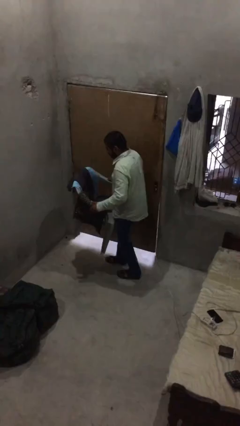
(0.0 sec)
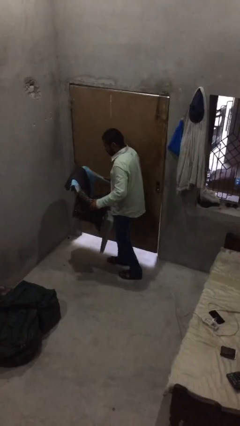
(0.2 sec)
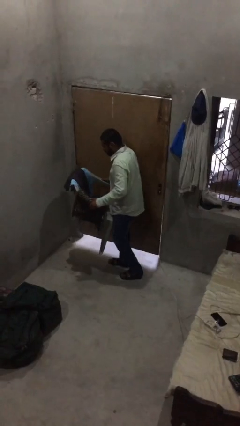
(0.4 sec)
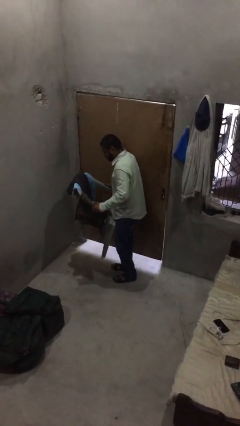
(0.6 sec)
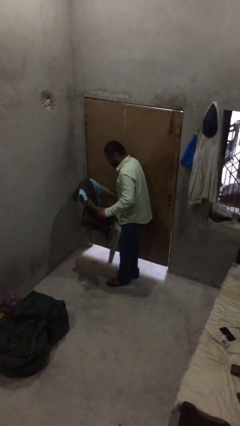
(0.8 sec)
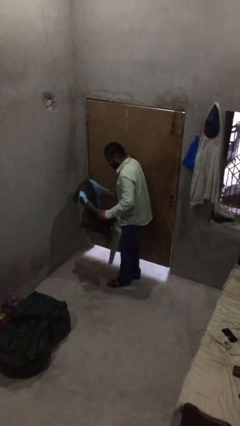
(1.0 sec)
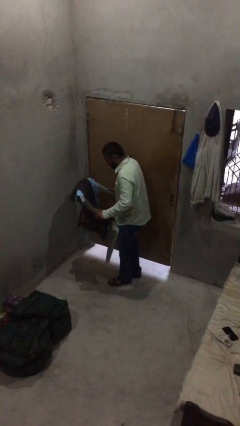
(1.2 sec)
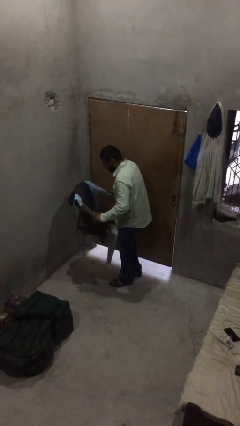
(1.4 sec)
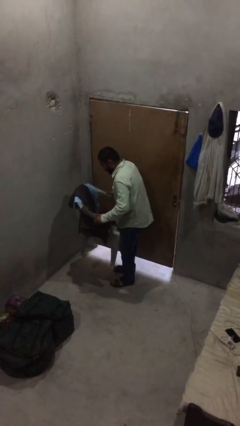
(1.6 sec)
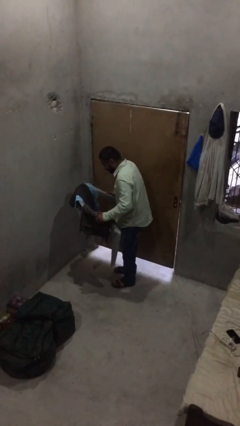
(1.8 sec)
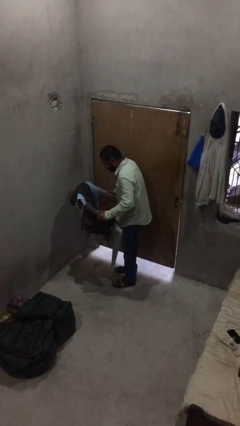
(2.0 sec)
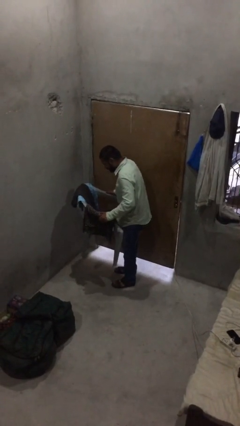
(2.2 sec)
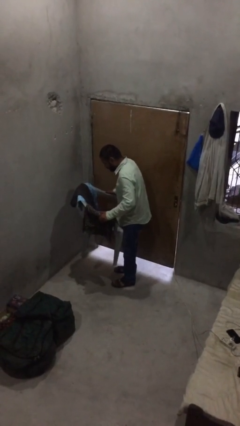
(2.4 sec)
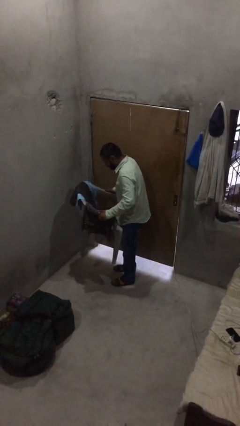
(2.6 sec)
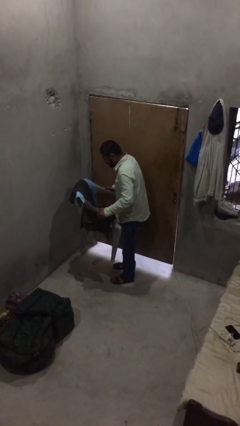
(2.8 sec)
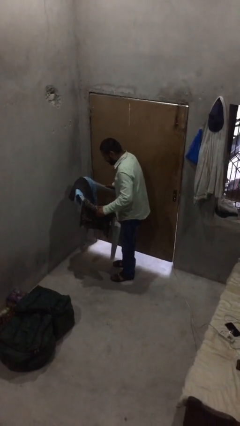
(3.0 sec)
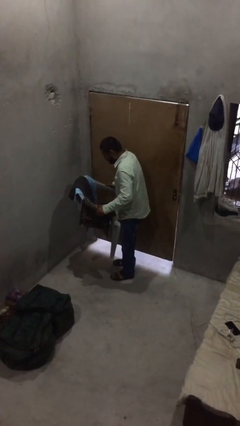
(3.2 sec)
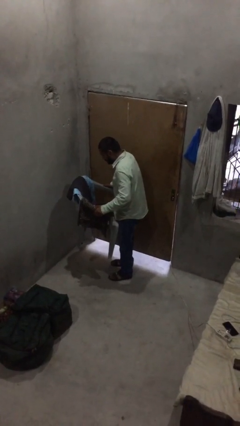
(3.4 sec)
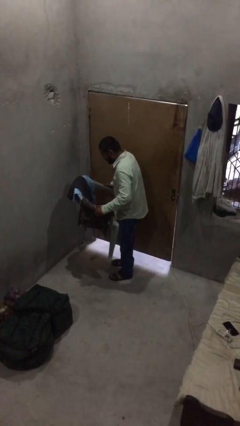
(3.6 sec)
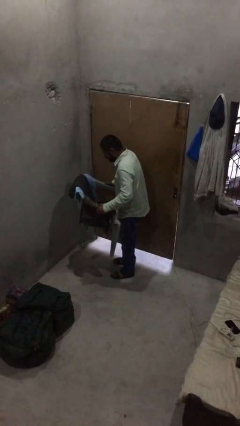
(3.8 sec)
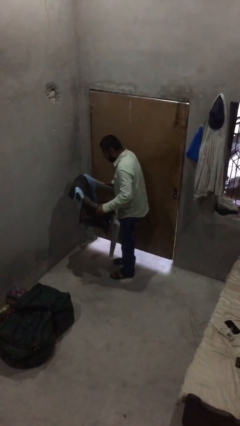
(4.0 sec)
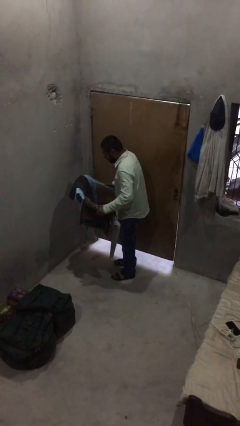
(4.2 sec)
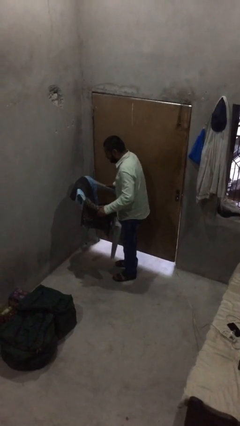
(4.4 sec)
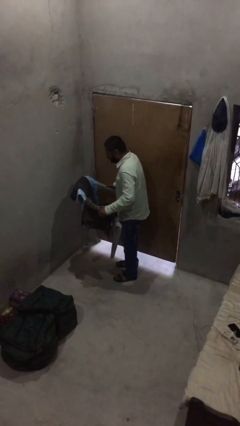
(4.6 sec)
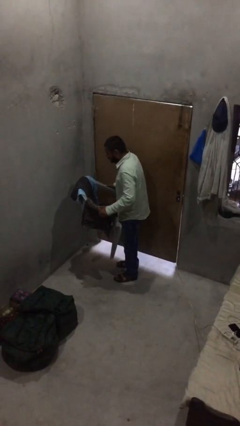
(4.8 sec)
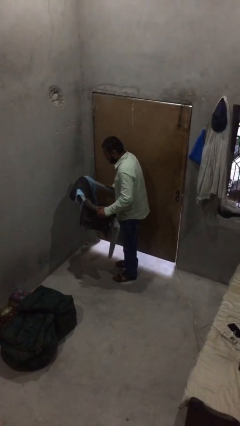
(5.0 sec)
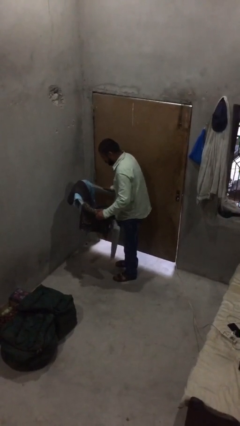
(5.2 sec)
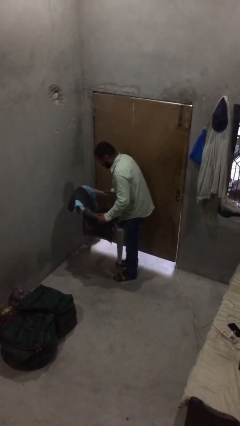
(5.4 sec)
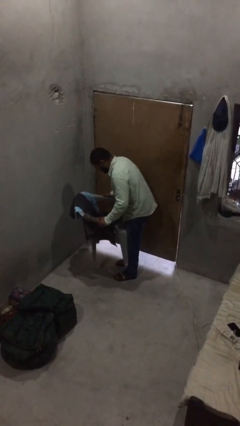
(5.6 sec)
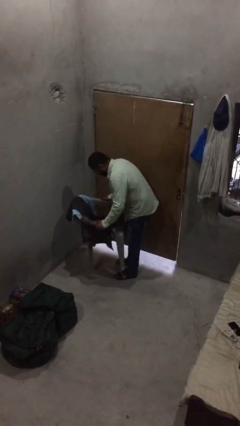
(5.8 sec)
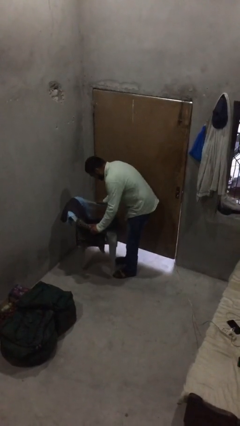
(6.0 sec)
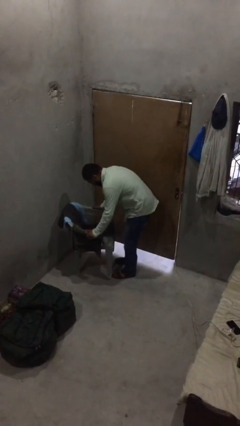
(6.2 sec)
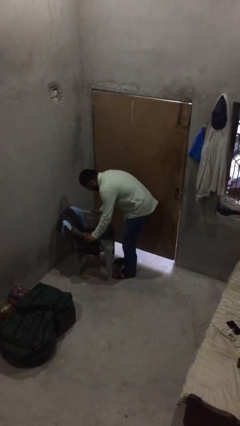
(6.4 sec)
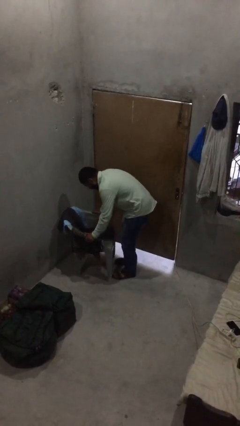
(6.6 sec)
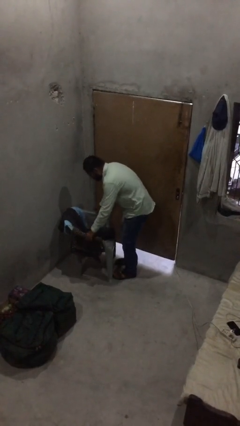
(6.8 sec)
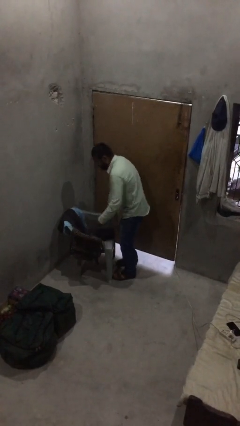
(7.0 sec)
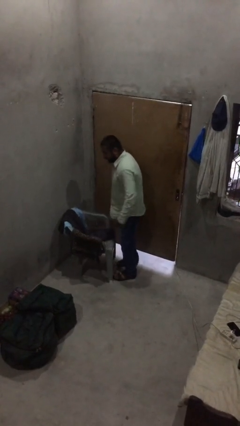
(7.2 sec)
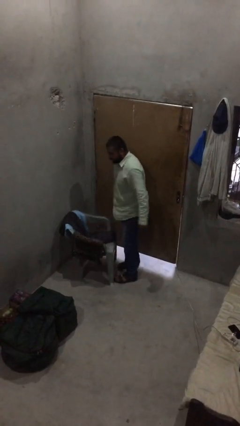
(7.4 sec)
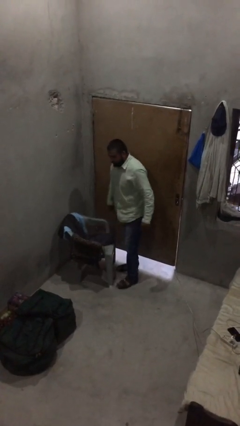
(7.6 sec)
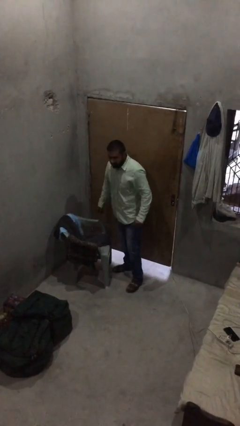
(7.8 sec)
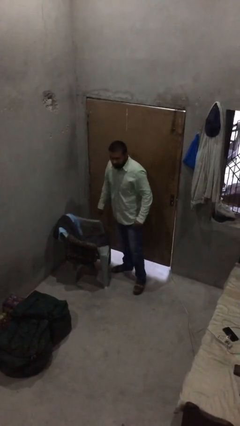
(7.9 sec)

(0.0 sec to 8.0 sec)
person puts down object on floor

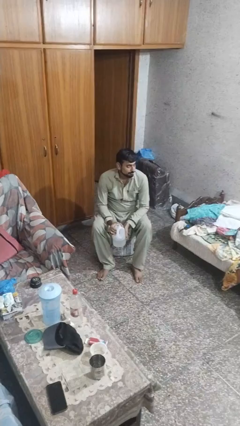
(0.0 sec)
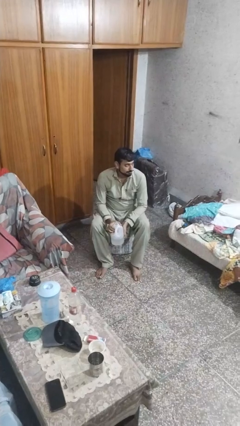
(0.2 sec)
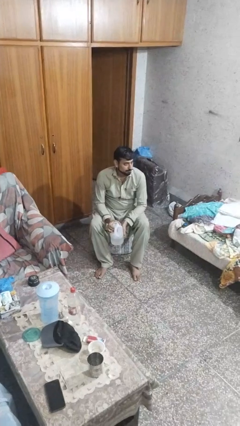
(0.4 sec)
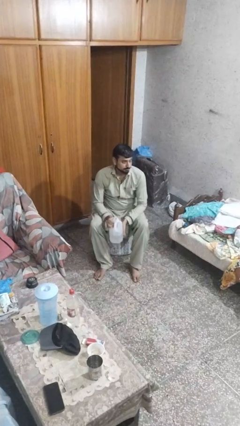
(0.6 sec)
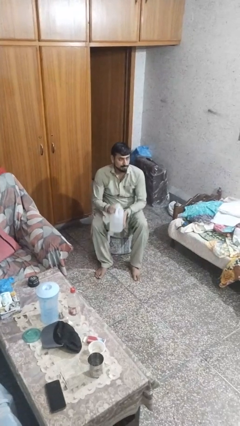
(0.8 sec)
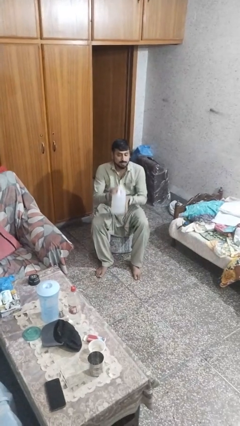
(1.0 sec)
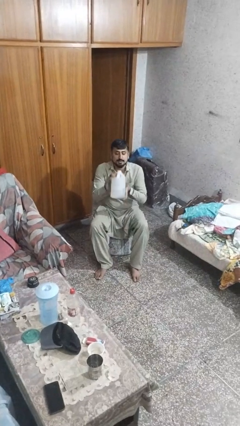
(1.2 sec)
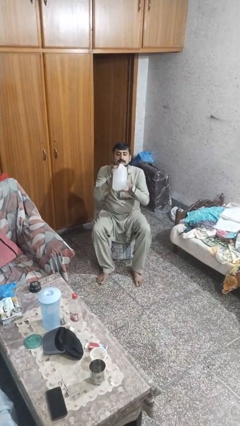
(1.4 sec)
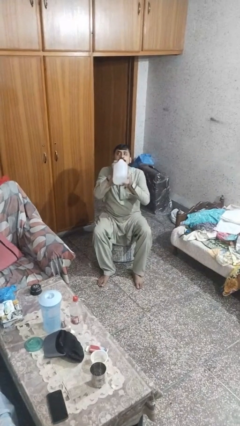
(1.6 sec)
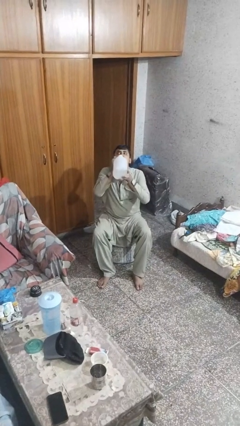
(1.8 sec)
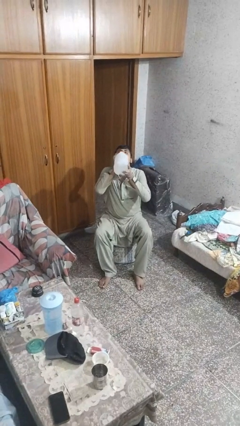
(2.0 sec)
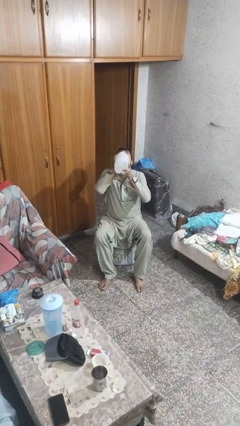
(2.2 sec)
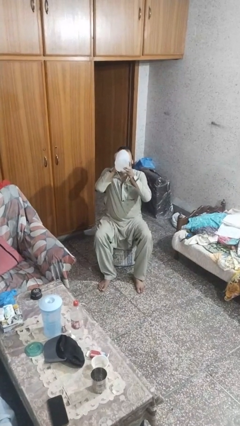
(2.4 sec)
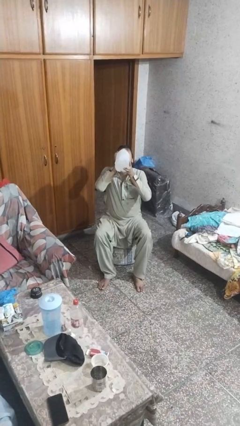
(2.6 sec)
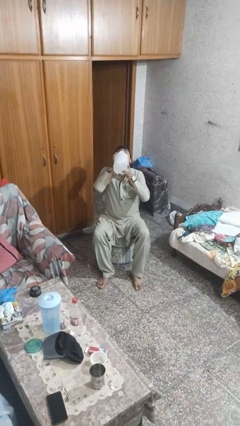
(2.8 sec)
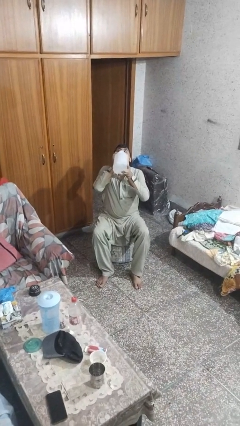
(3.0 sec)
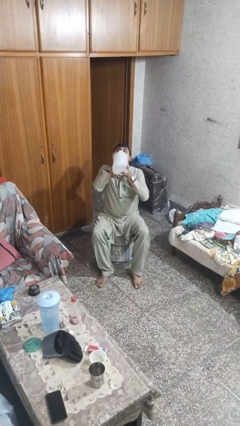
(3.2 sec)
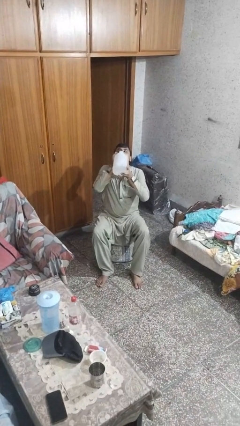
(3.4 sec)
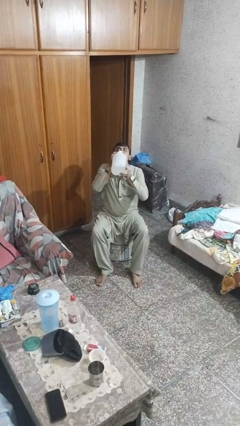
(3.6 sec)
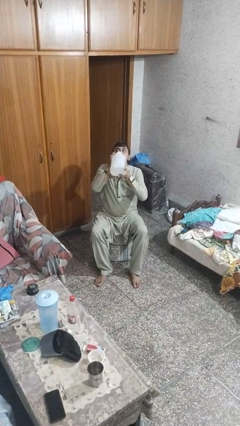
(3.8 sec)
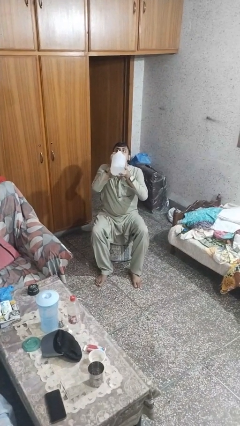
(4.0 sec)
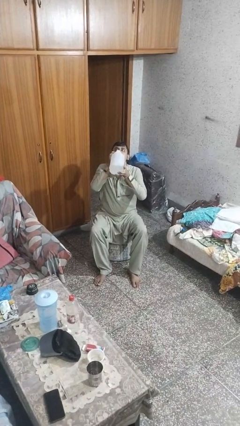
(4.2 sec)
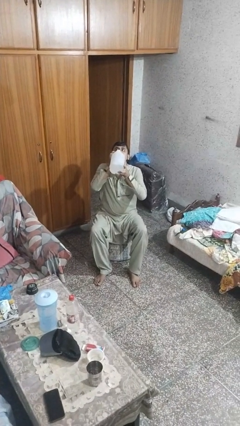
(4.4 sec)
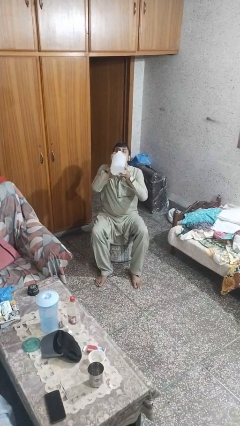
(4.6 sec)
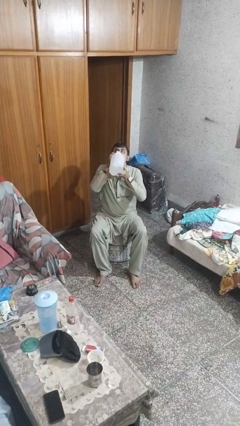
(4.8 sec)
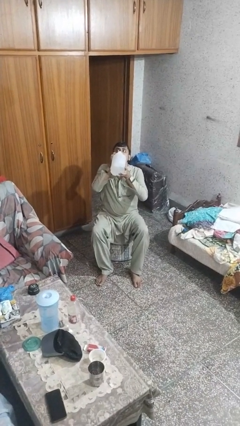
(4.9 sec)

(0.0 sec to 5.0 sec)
person drinks from bottle

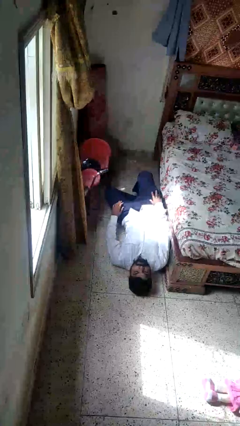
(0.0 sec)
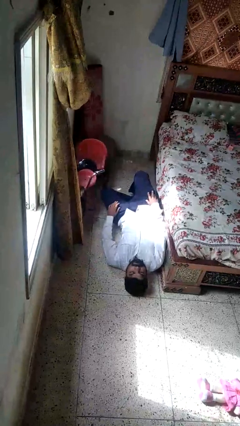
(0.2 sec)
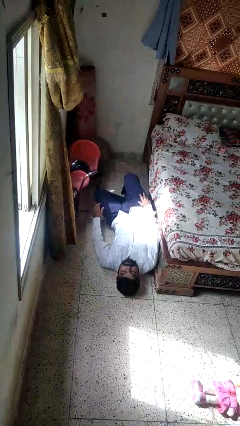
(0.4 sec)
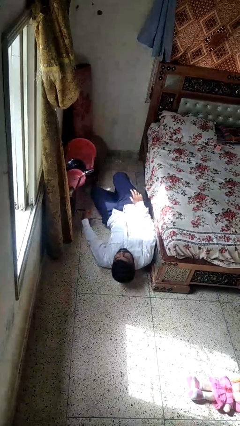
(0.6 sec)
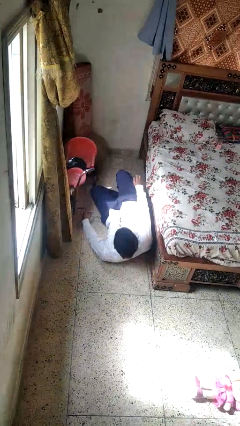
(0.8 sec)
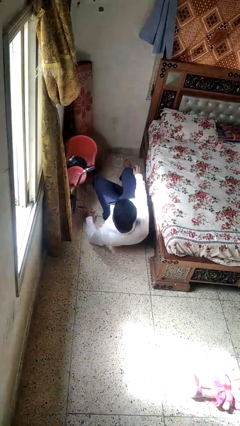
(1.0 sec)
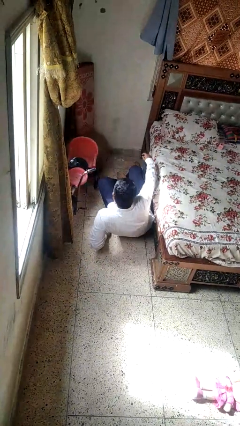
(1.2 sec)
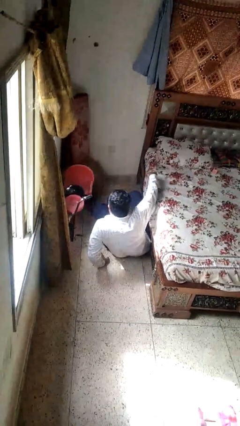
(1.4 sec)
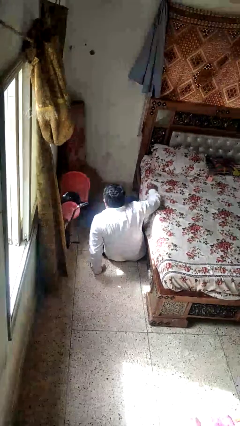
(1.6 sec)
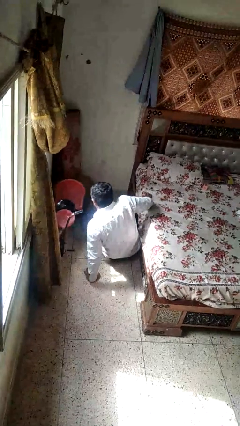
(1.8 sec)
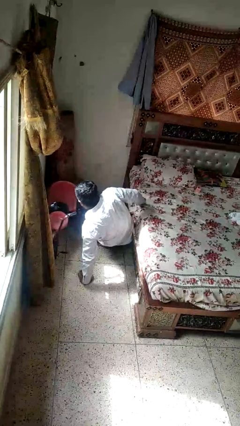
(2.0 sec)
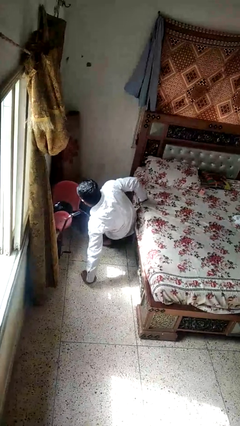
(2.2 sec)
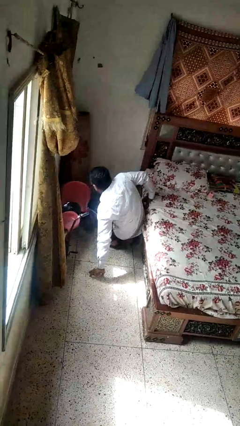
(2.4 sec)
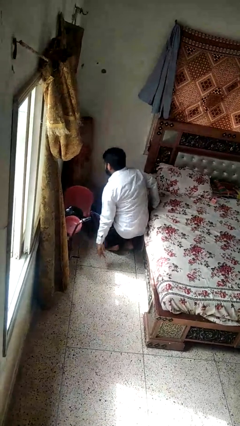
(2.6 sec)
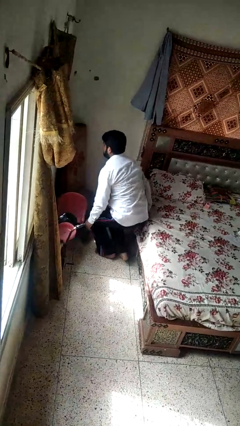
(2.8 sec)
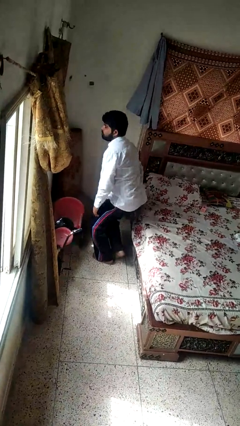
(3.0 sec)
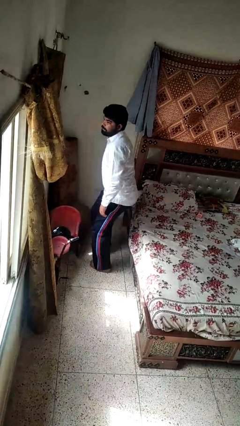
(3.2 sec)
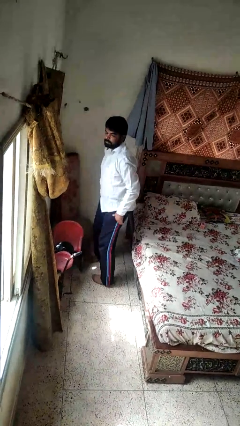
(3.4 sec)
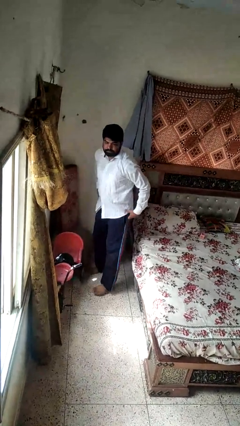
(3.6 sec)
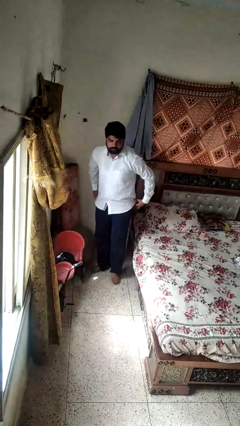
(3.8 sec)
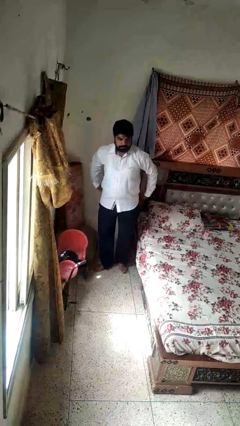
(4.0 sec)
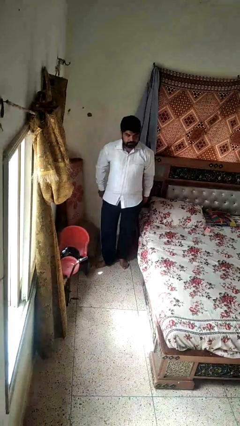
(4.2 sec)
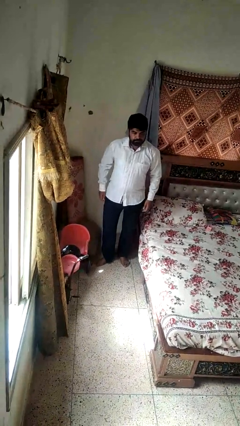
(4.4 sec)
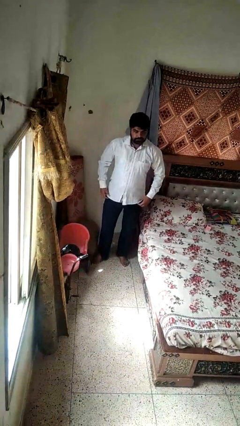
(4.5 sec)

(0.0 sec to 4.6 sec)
person stands up from floor

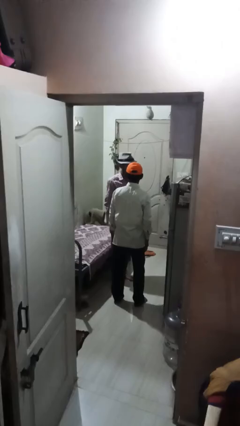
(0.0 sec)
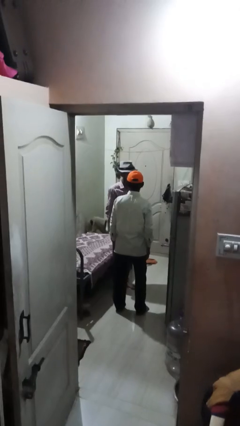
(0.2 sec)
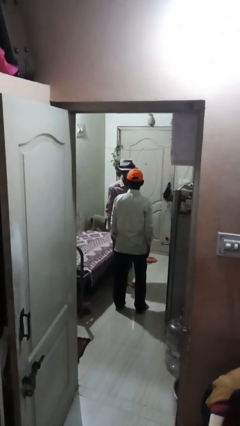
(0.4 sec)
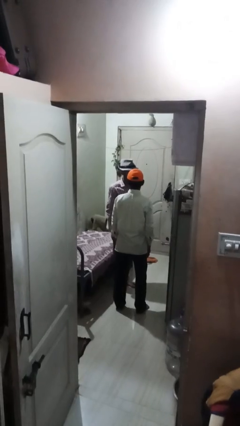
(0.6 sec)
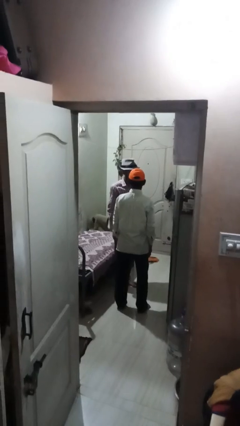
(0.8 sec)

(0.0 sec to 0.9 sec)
person touches face of person
